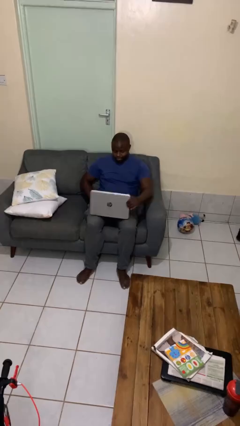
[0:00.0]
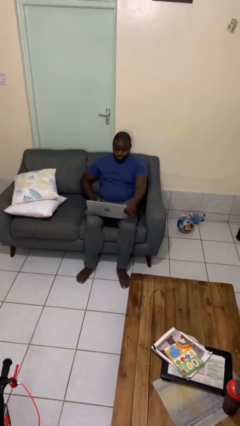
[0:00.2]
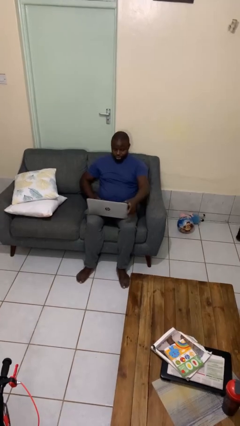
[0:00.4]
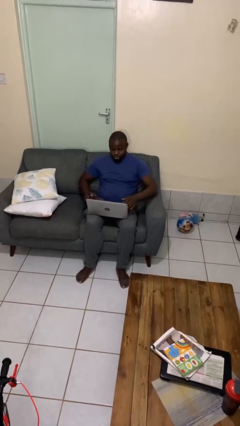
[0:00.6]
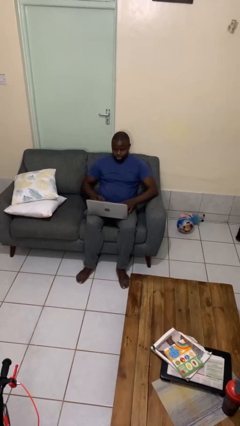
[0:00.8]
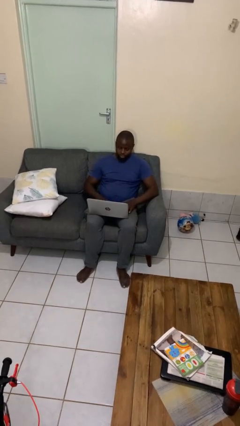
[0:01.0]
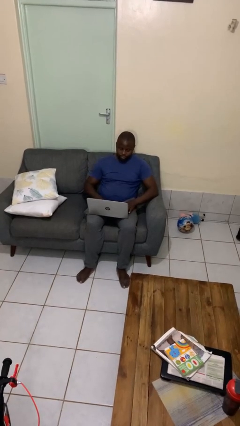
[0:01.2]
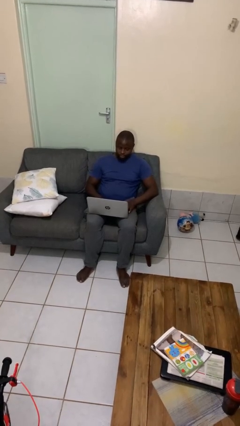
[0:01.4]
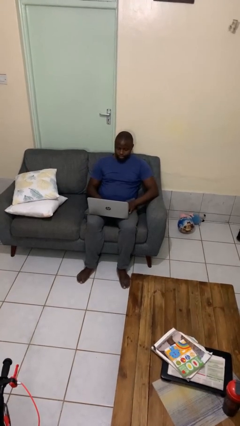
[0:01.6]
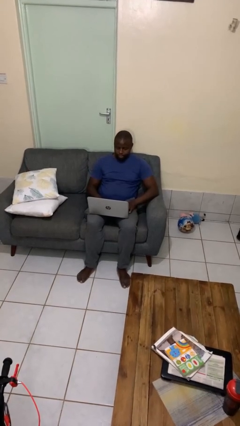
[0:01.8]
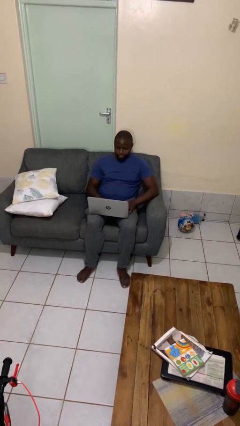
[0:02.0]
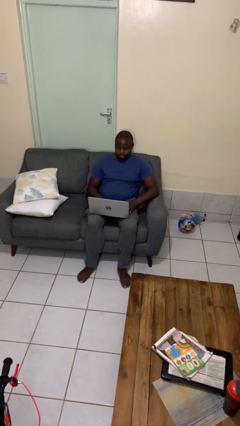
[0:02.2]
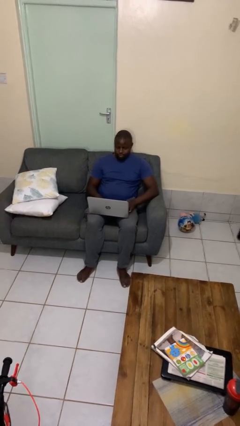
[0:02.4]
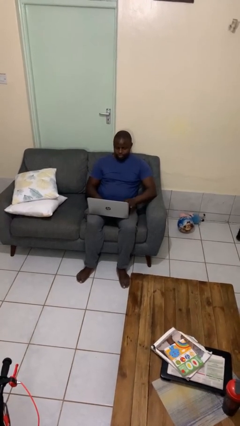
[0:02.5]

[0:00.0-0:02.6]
person opens laptop

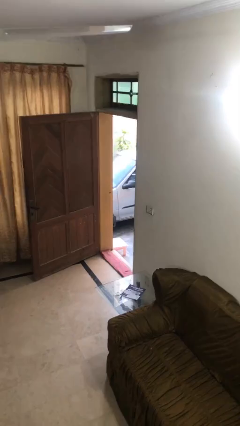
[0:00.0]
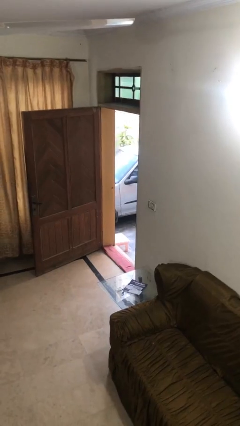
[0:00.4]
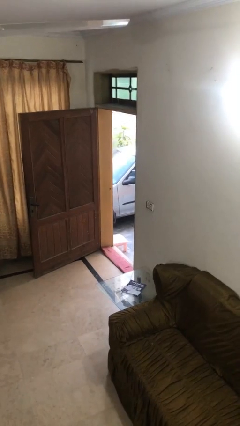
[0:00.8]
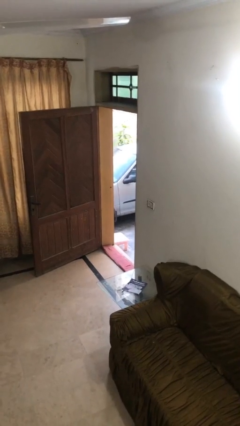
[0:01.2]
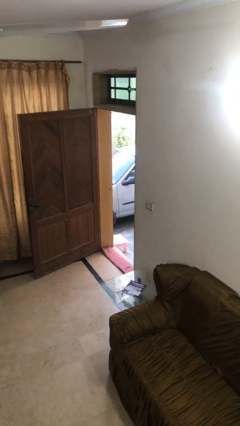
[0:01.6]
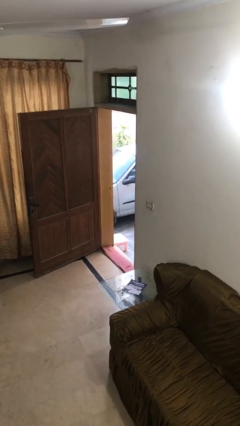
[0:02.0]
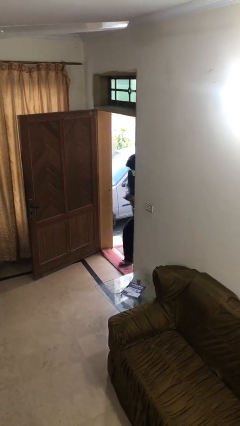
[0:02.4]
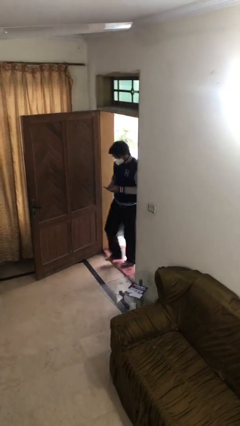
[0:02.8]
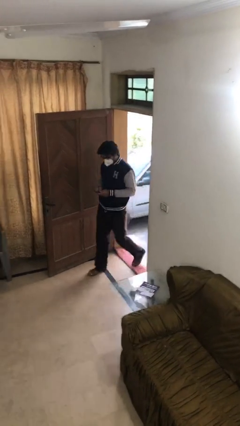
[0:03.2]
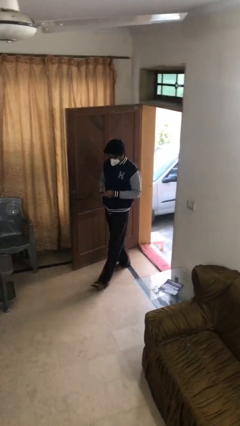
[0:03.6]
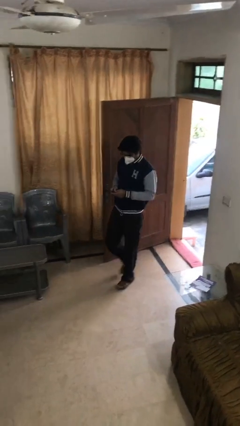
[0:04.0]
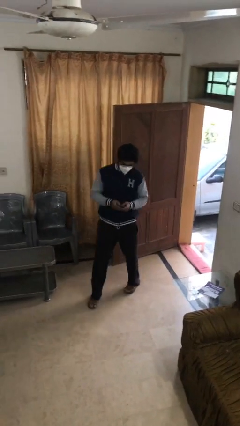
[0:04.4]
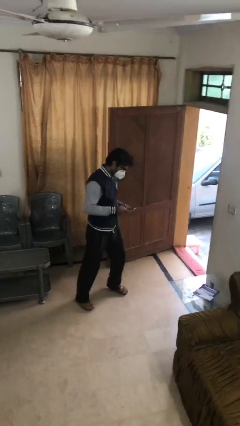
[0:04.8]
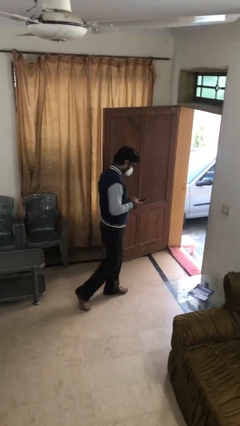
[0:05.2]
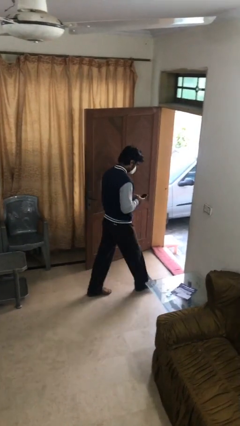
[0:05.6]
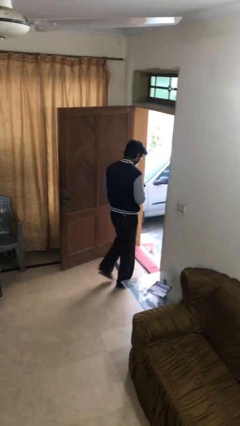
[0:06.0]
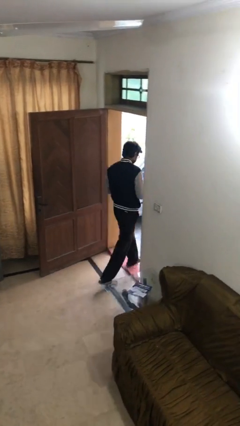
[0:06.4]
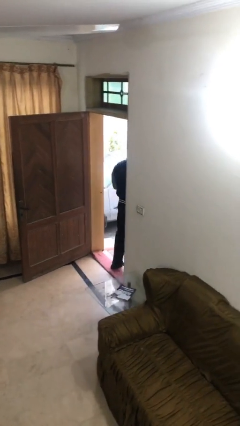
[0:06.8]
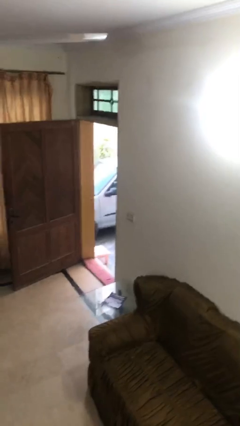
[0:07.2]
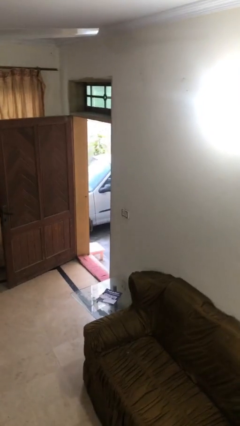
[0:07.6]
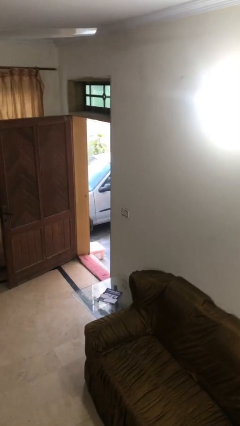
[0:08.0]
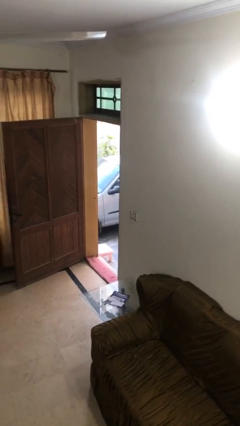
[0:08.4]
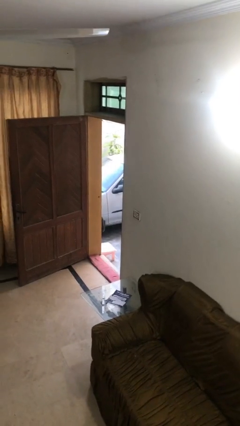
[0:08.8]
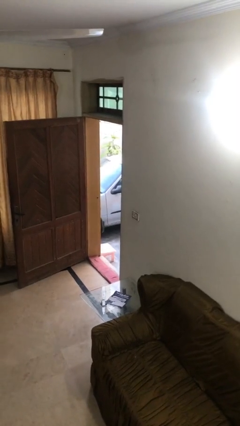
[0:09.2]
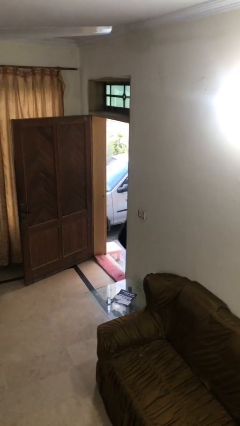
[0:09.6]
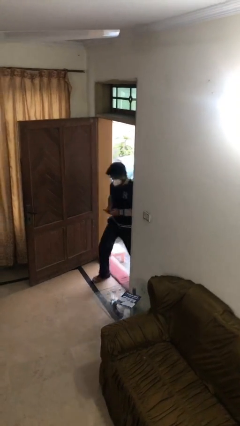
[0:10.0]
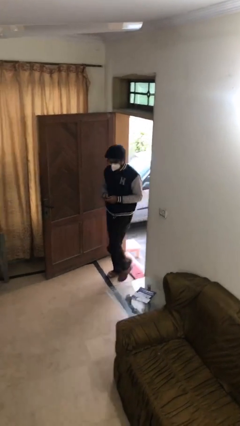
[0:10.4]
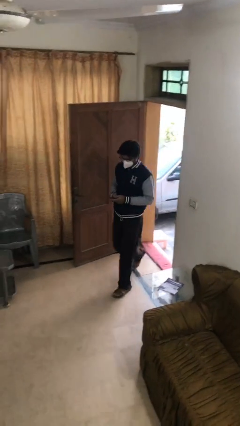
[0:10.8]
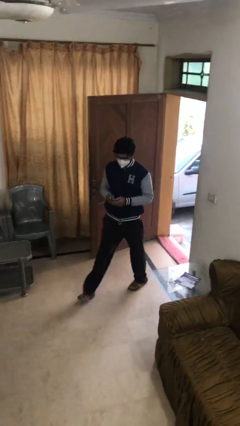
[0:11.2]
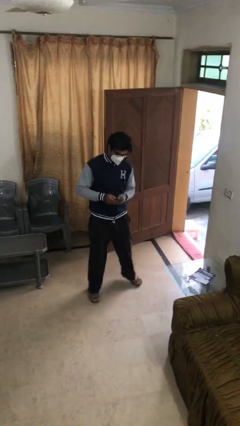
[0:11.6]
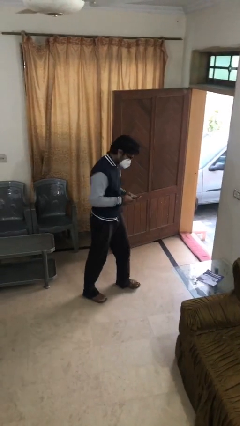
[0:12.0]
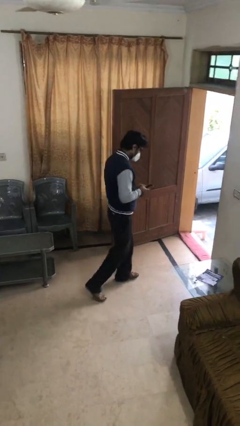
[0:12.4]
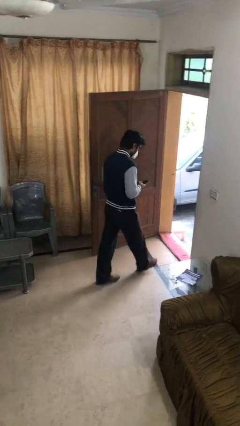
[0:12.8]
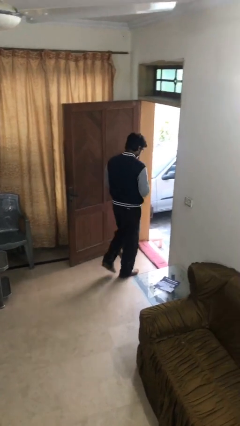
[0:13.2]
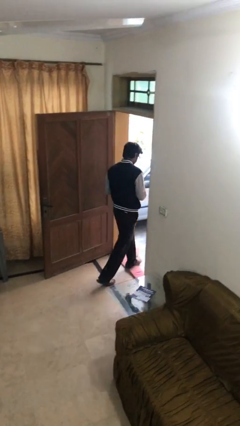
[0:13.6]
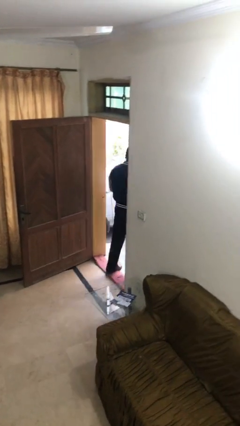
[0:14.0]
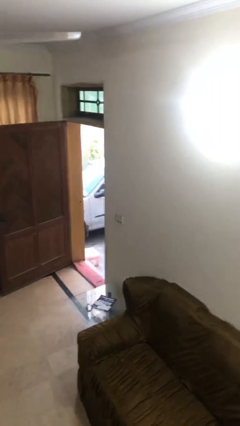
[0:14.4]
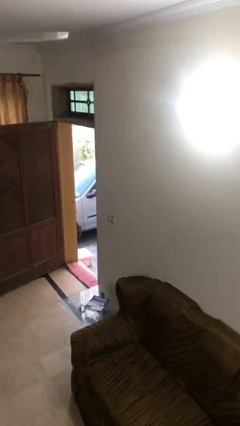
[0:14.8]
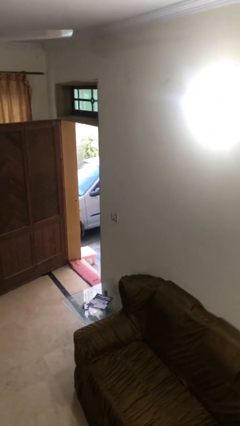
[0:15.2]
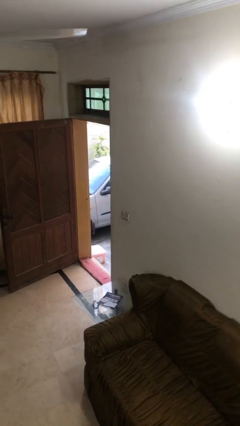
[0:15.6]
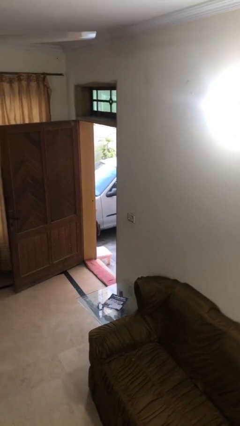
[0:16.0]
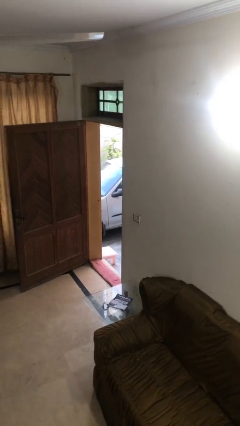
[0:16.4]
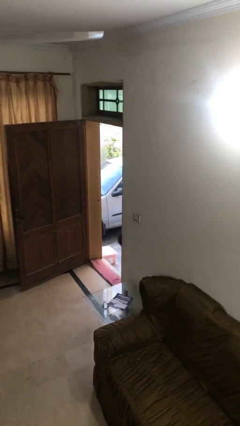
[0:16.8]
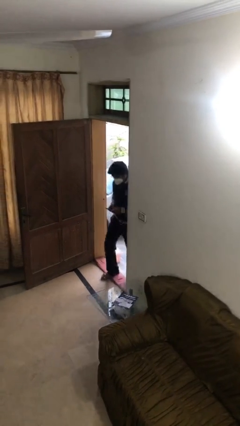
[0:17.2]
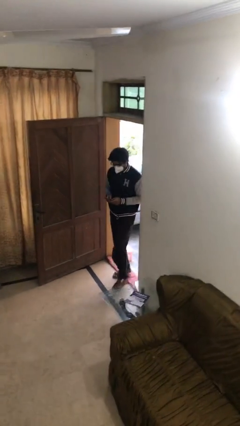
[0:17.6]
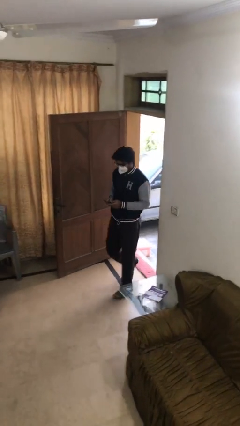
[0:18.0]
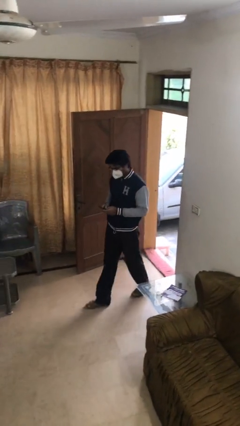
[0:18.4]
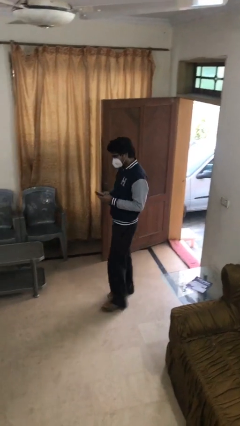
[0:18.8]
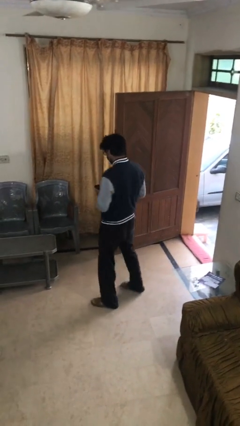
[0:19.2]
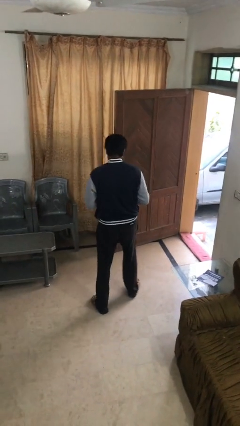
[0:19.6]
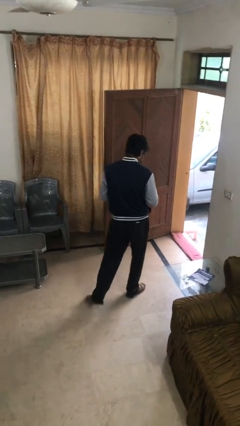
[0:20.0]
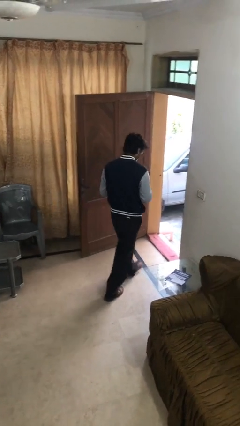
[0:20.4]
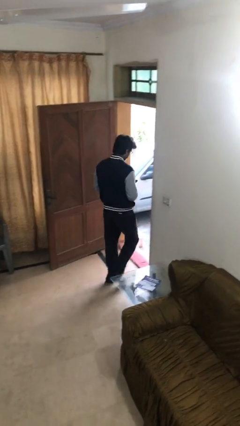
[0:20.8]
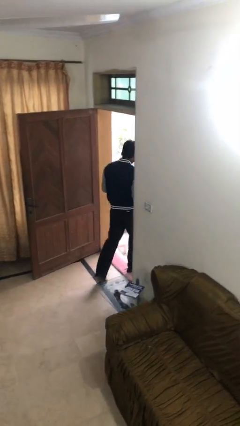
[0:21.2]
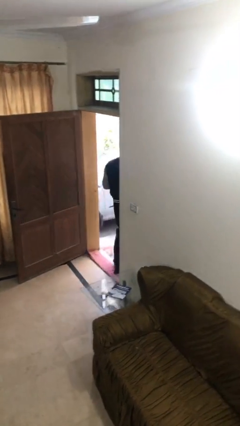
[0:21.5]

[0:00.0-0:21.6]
person texts on phone

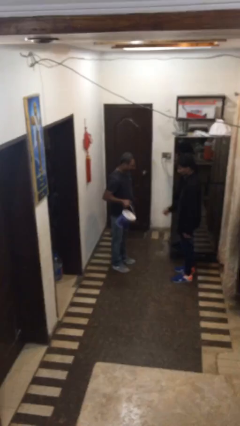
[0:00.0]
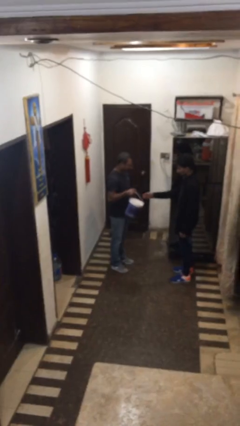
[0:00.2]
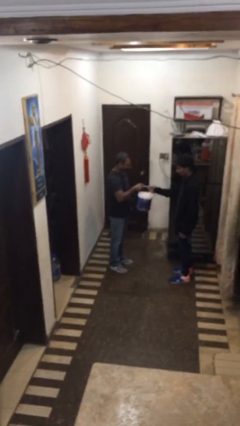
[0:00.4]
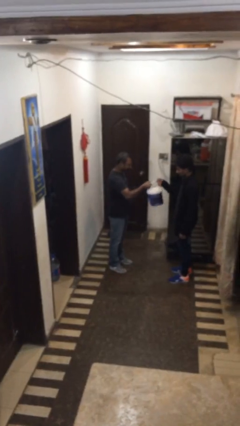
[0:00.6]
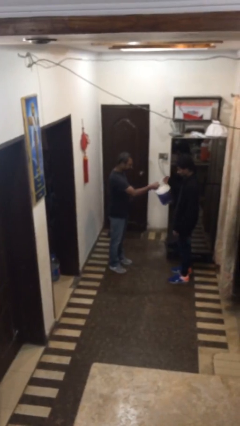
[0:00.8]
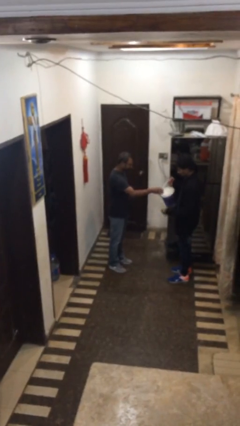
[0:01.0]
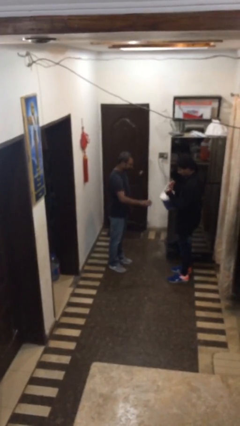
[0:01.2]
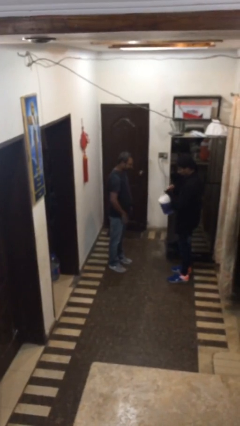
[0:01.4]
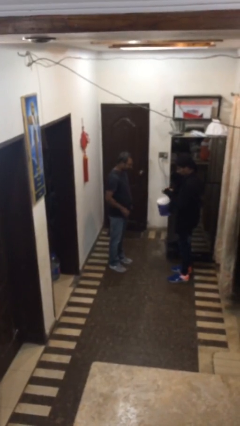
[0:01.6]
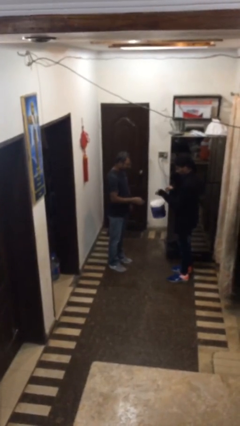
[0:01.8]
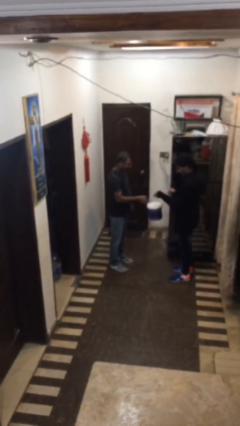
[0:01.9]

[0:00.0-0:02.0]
person transfers object to person

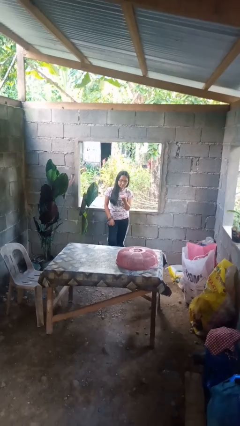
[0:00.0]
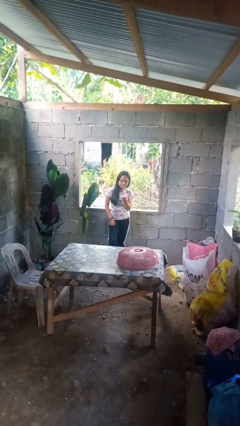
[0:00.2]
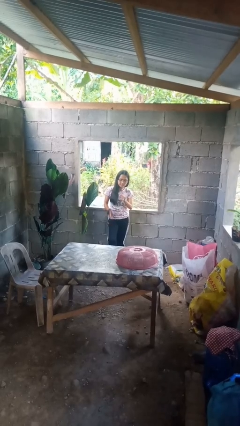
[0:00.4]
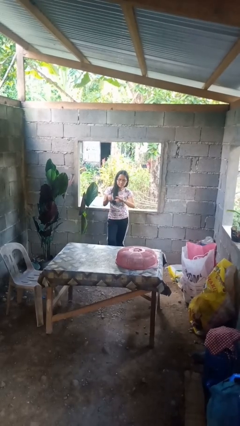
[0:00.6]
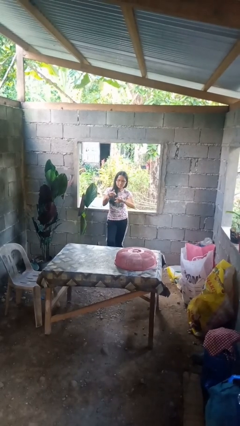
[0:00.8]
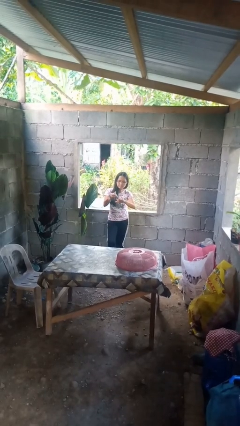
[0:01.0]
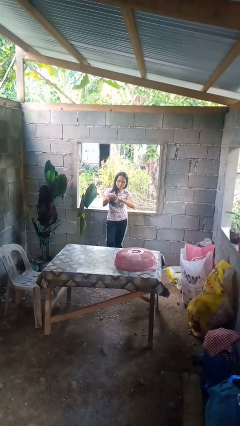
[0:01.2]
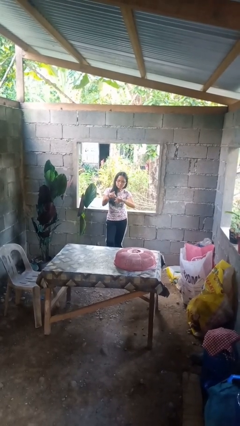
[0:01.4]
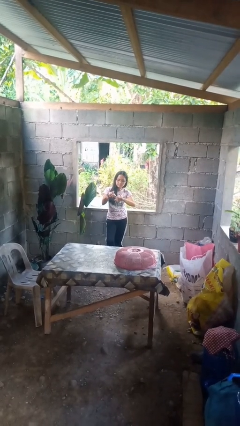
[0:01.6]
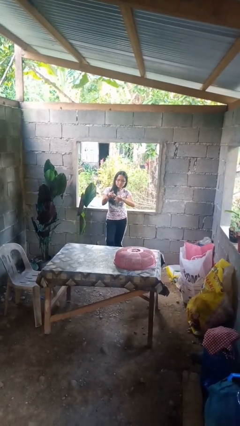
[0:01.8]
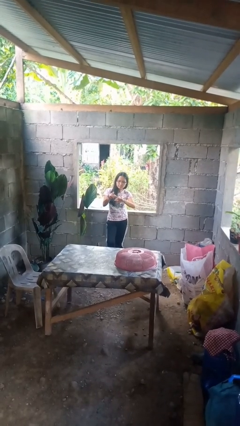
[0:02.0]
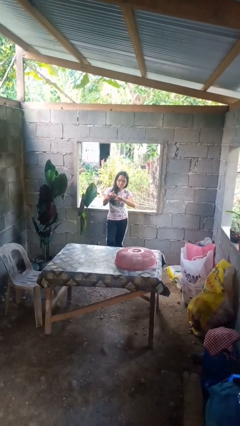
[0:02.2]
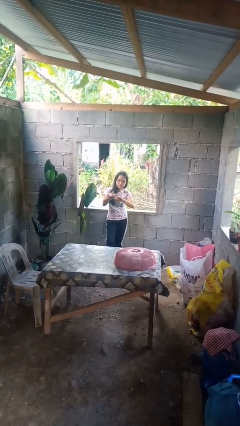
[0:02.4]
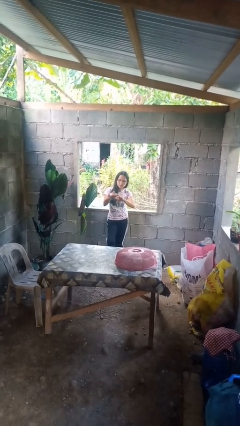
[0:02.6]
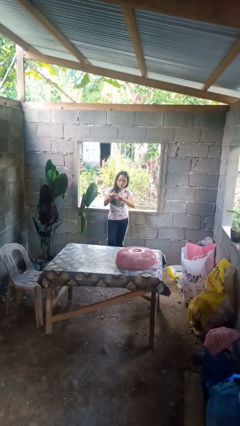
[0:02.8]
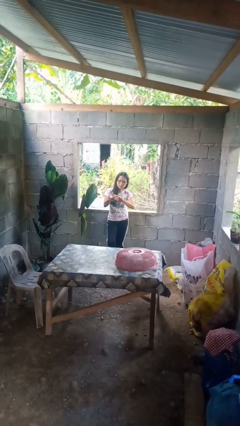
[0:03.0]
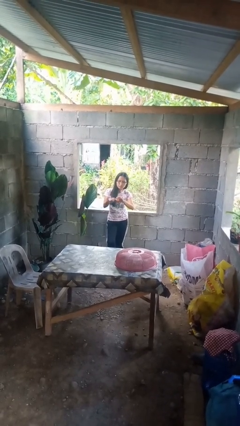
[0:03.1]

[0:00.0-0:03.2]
person clips fingernails
